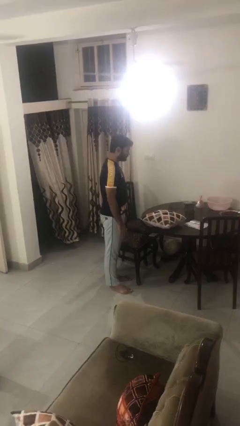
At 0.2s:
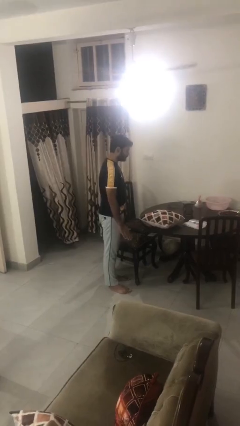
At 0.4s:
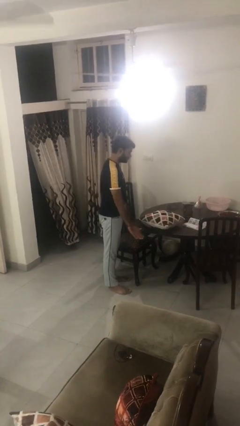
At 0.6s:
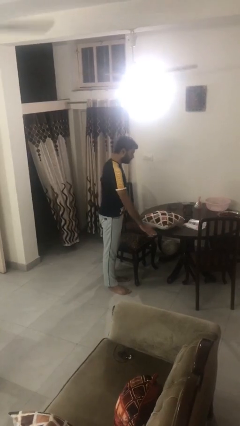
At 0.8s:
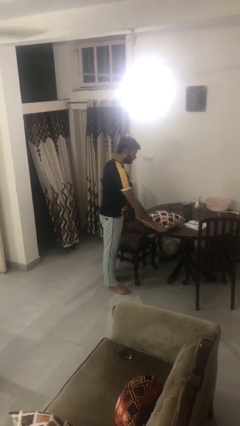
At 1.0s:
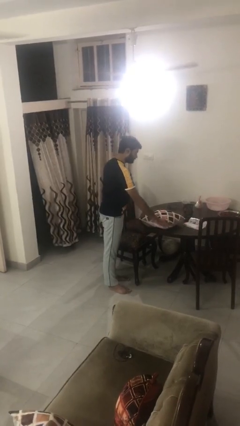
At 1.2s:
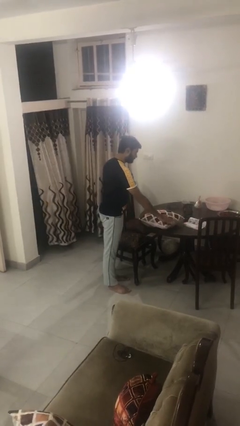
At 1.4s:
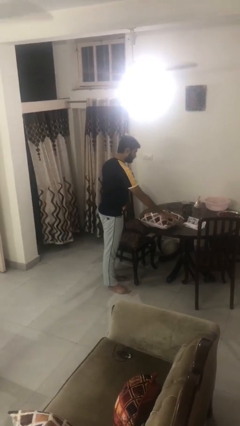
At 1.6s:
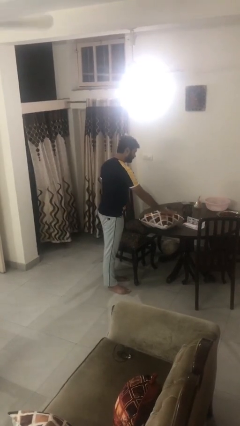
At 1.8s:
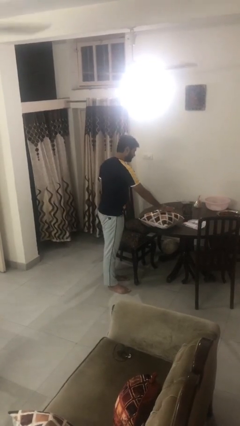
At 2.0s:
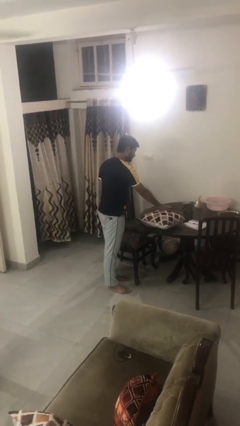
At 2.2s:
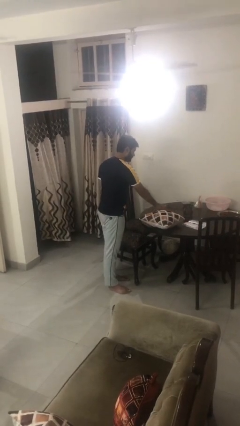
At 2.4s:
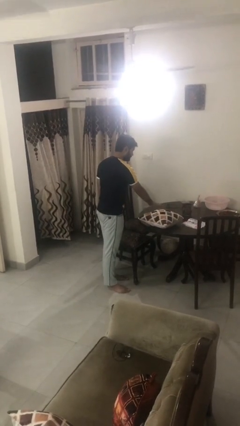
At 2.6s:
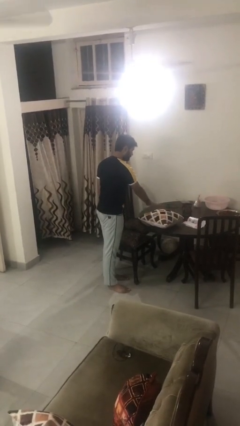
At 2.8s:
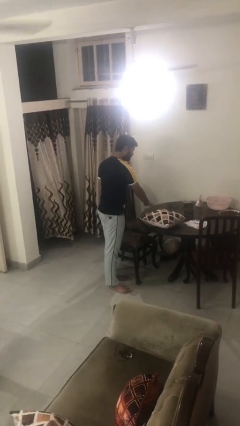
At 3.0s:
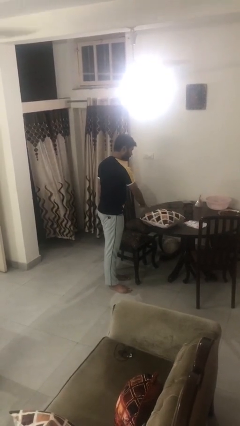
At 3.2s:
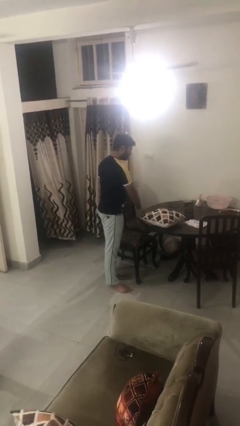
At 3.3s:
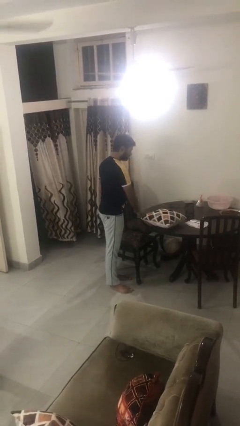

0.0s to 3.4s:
person waves hand over object

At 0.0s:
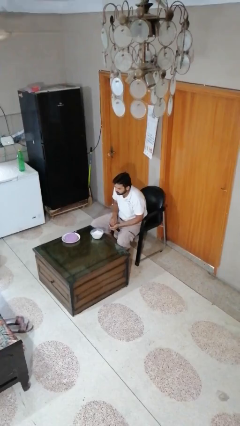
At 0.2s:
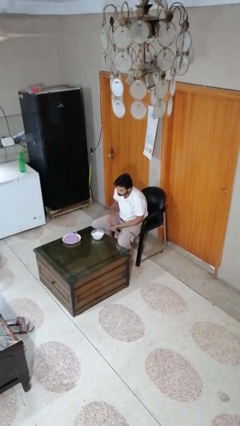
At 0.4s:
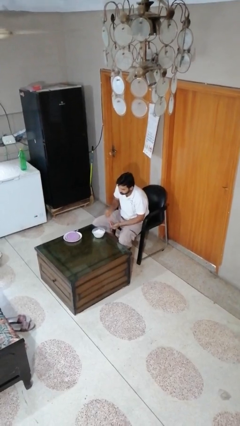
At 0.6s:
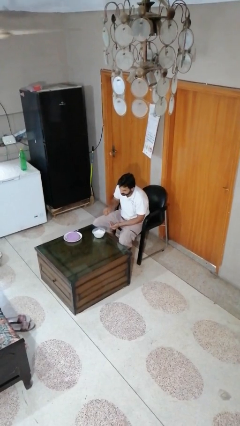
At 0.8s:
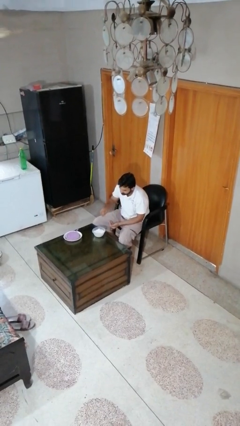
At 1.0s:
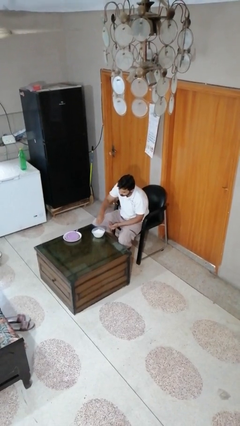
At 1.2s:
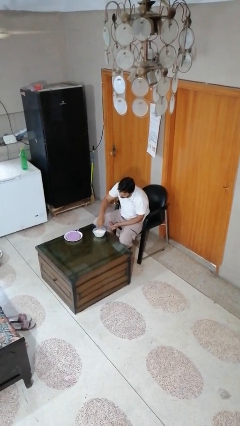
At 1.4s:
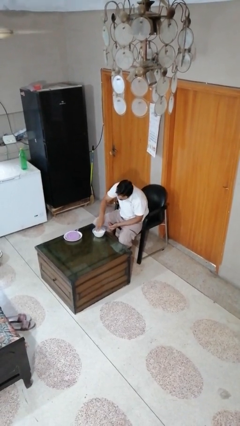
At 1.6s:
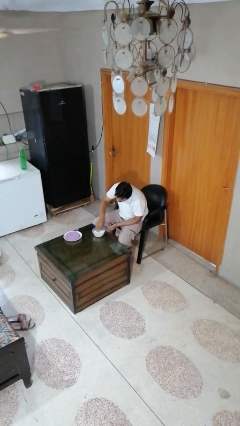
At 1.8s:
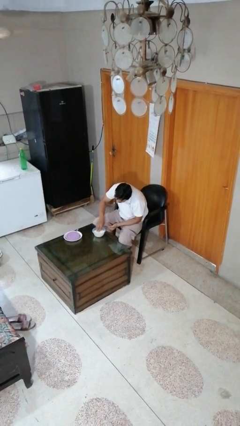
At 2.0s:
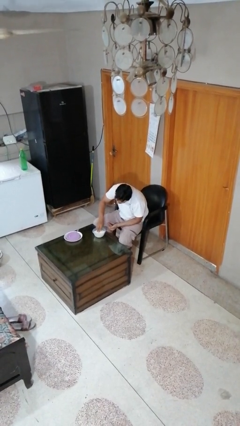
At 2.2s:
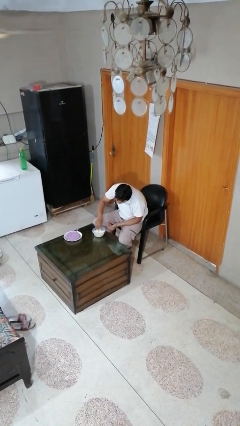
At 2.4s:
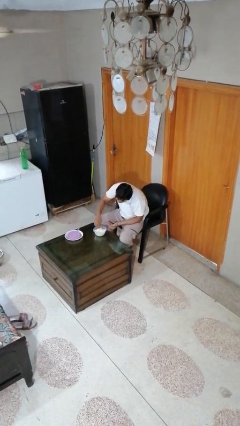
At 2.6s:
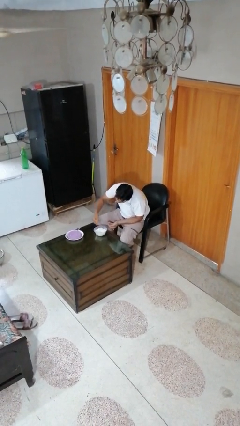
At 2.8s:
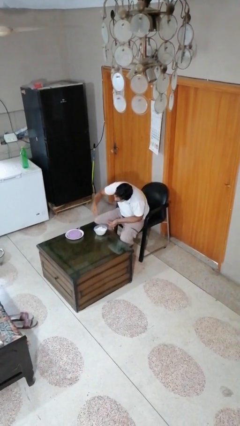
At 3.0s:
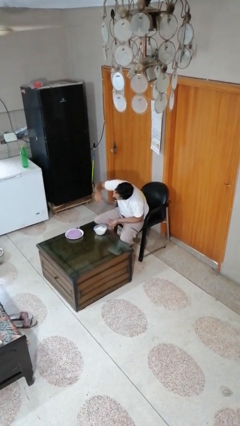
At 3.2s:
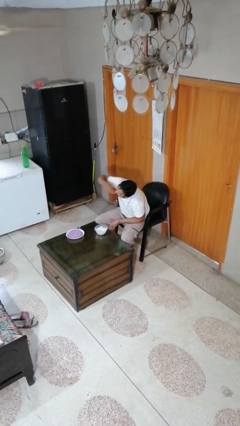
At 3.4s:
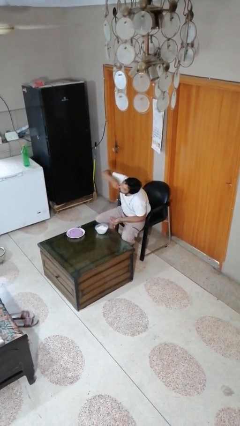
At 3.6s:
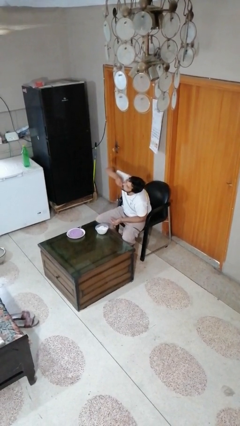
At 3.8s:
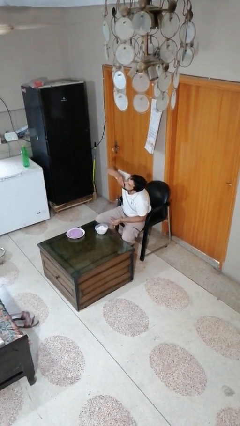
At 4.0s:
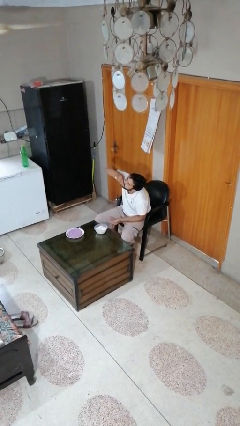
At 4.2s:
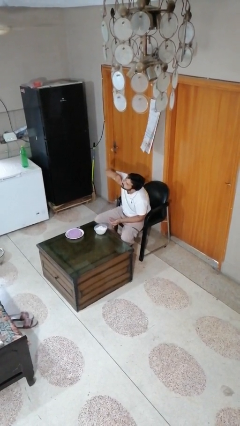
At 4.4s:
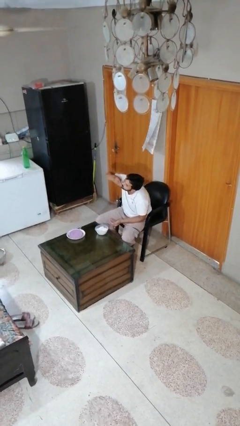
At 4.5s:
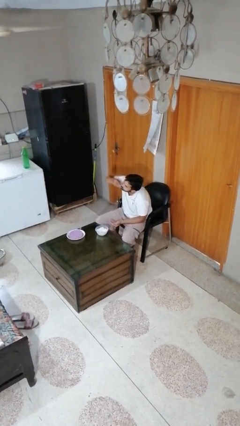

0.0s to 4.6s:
person eats with hands

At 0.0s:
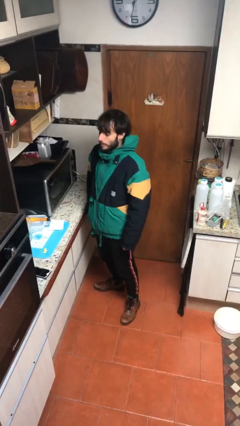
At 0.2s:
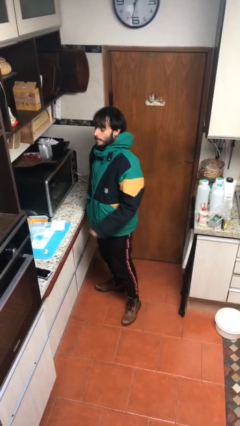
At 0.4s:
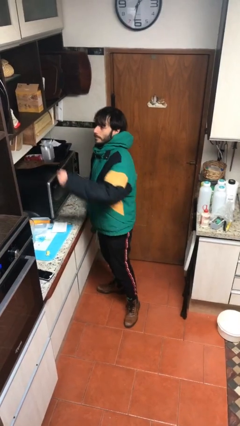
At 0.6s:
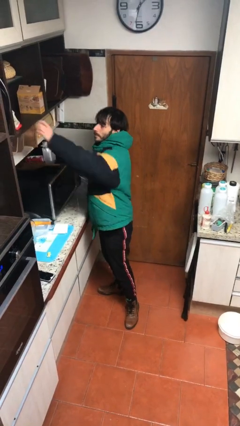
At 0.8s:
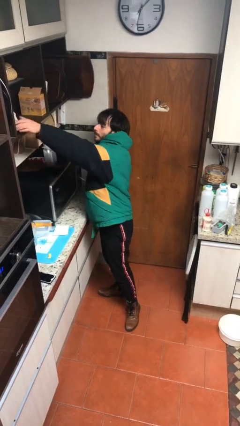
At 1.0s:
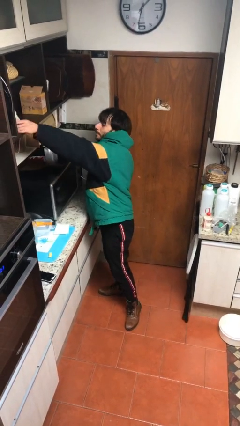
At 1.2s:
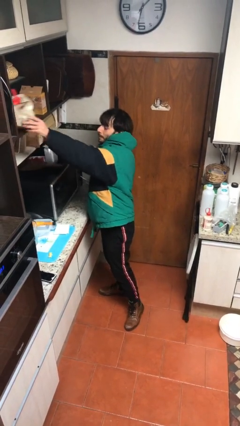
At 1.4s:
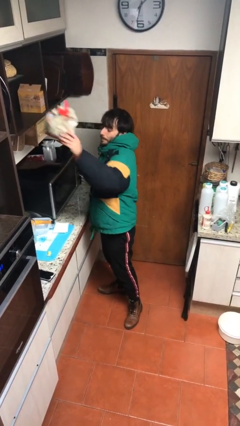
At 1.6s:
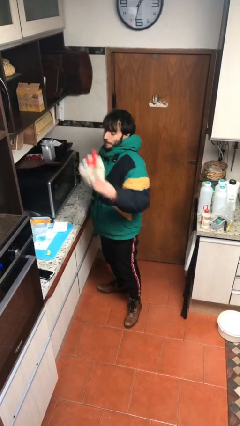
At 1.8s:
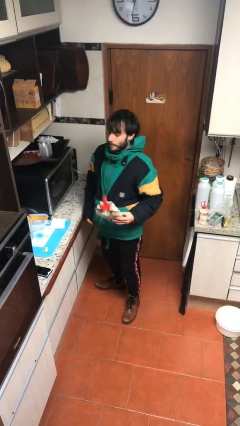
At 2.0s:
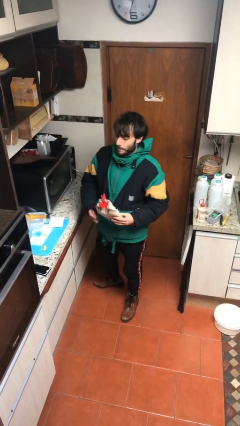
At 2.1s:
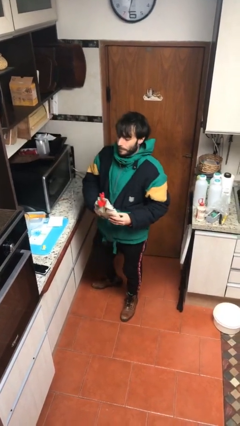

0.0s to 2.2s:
person picks up object from cabinet

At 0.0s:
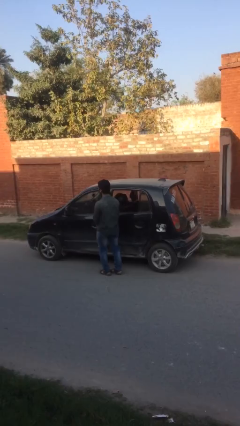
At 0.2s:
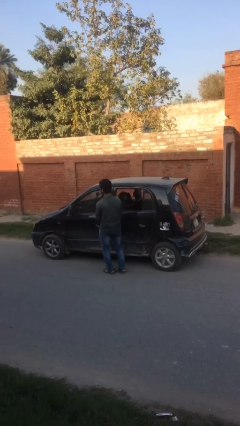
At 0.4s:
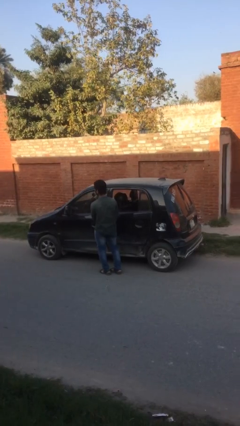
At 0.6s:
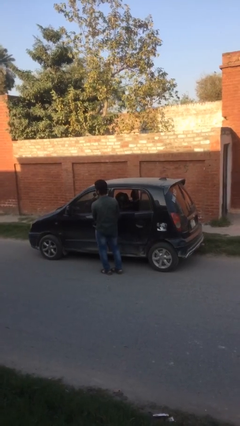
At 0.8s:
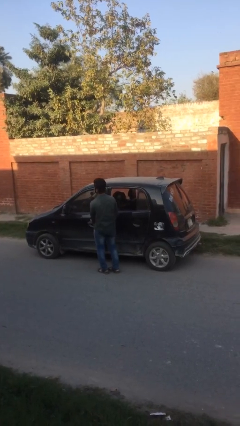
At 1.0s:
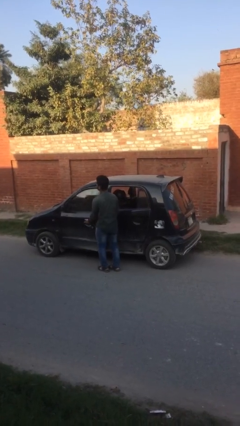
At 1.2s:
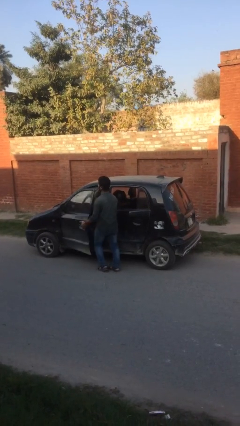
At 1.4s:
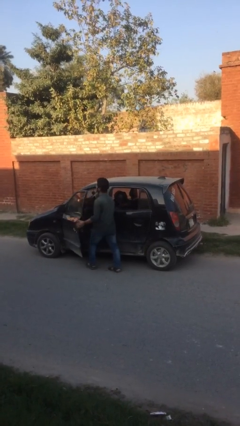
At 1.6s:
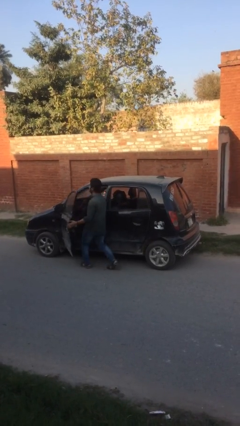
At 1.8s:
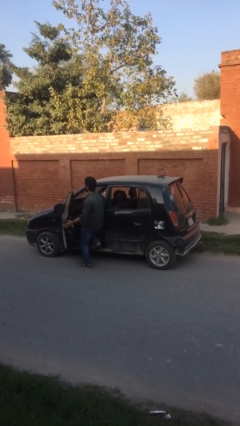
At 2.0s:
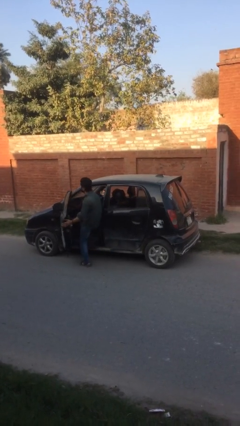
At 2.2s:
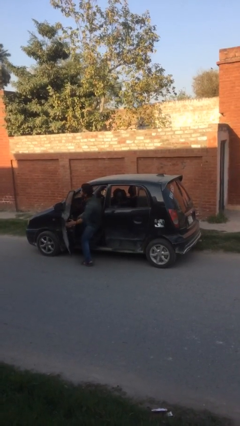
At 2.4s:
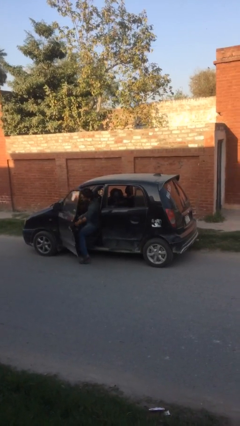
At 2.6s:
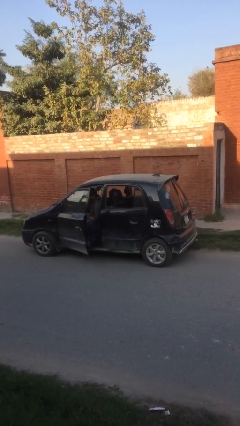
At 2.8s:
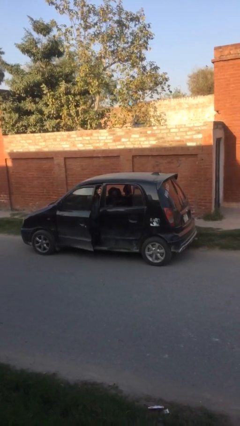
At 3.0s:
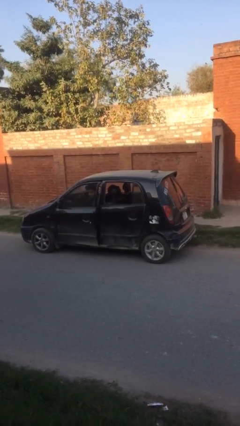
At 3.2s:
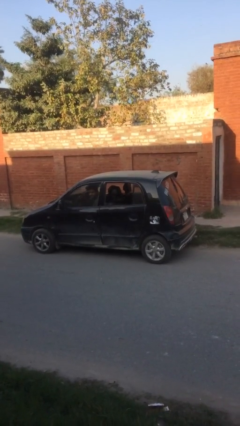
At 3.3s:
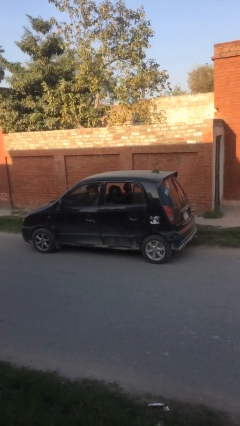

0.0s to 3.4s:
car picks up person

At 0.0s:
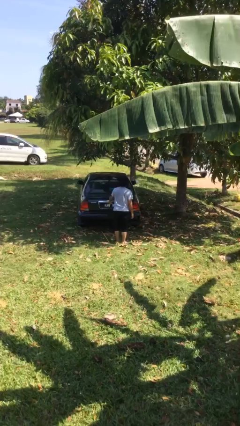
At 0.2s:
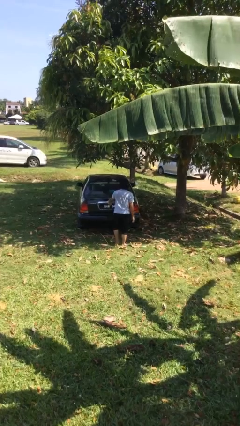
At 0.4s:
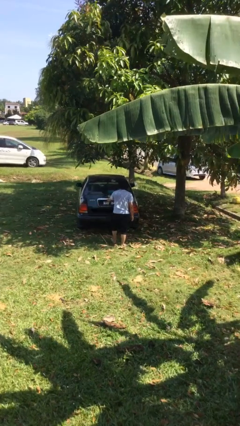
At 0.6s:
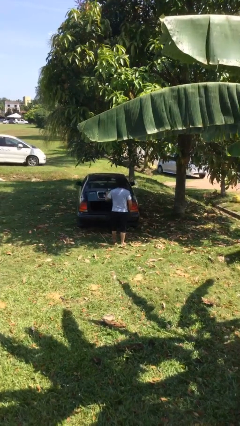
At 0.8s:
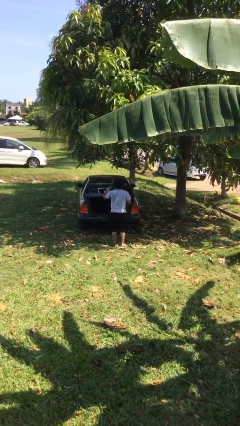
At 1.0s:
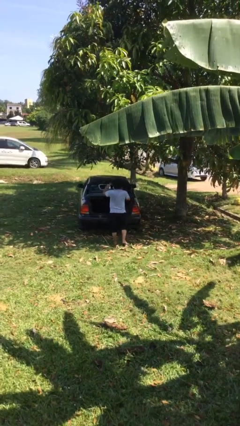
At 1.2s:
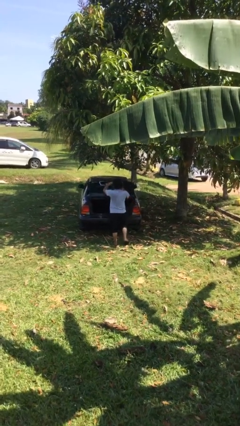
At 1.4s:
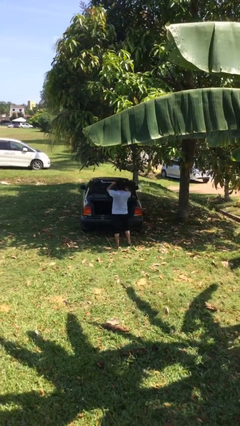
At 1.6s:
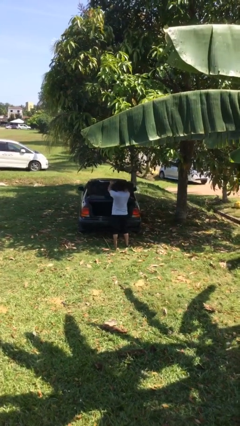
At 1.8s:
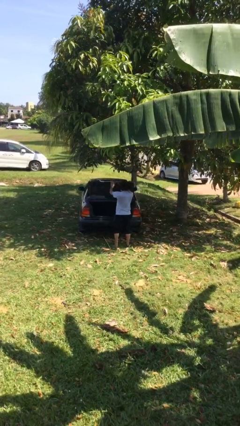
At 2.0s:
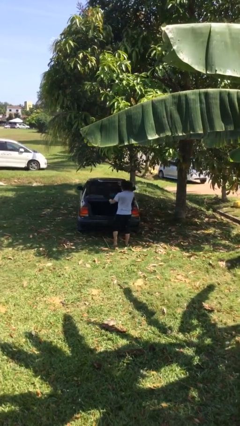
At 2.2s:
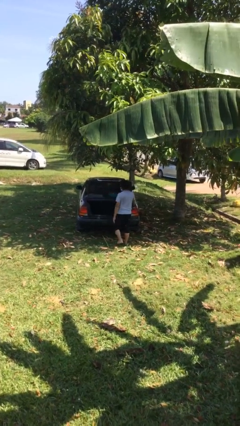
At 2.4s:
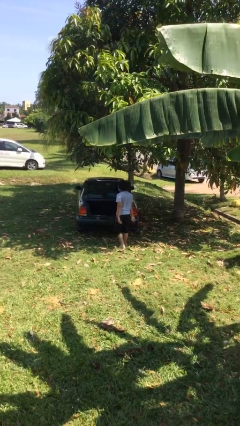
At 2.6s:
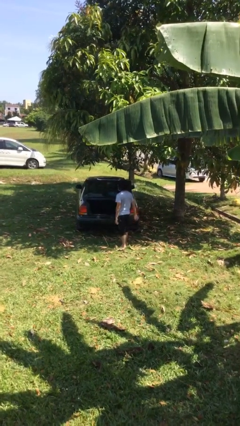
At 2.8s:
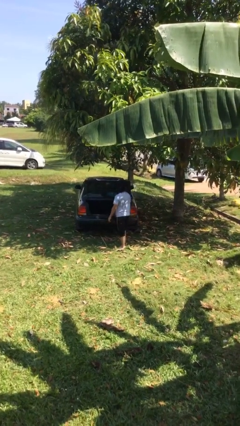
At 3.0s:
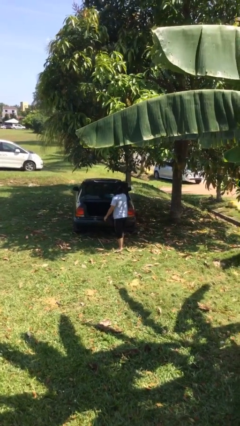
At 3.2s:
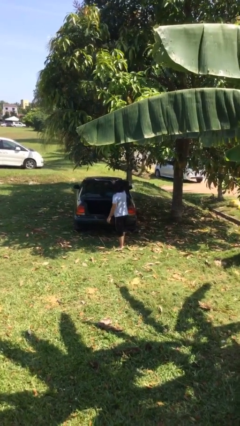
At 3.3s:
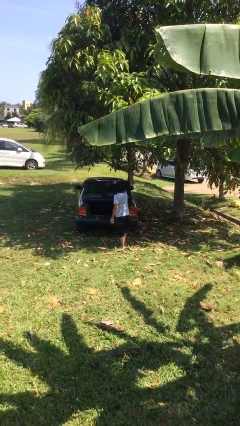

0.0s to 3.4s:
person opens car trunk

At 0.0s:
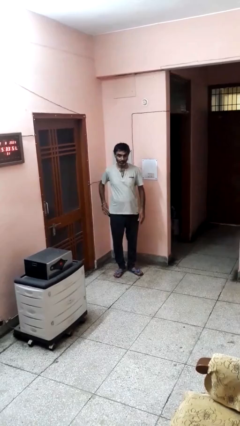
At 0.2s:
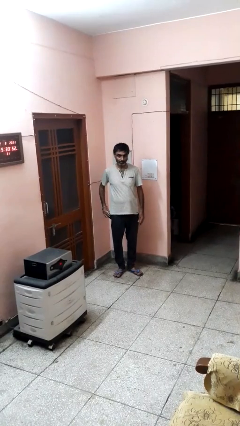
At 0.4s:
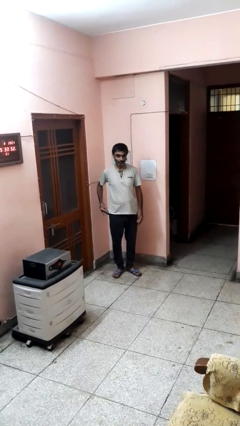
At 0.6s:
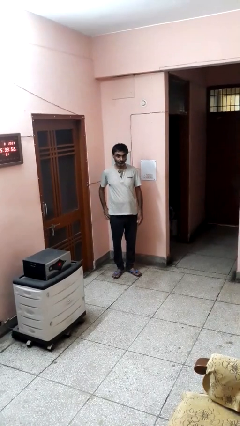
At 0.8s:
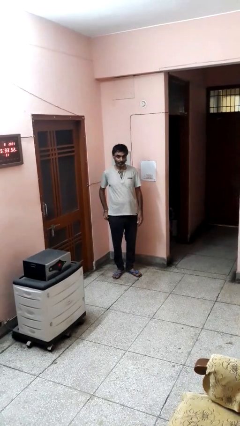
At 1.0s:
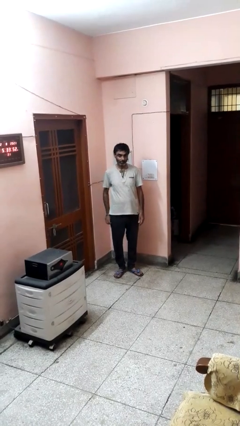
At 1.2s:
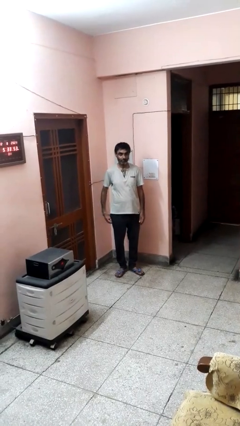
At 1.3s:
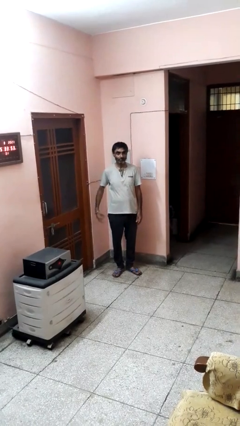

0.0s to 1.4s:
person puts phone into pocket
